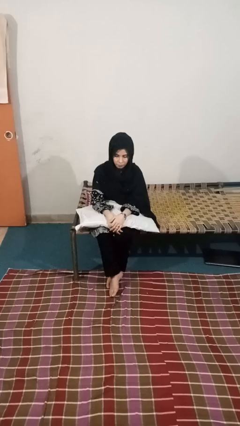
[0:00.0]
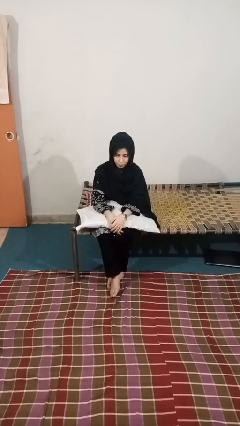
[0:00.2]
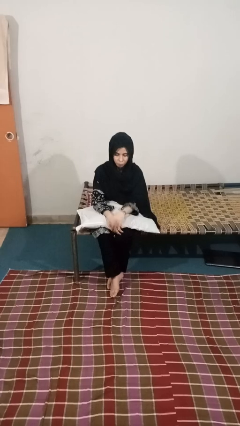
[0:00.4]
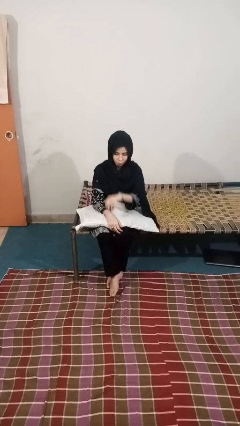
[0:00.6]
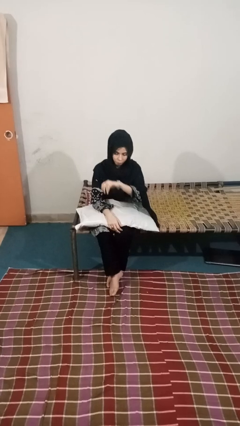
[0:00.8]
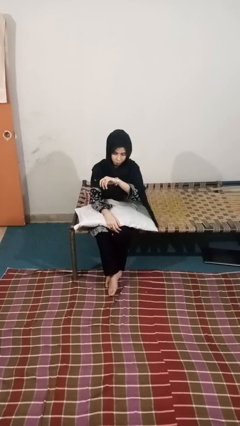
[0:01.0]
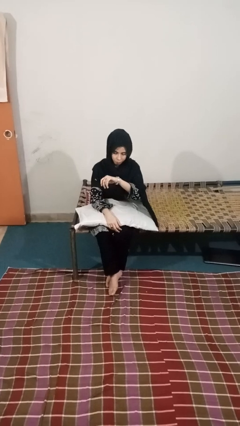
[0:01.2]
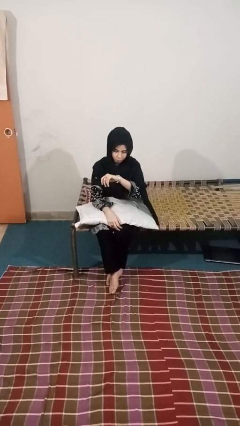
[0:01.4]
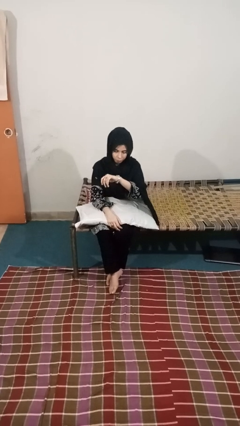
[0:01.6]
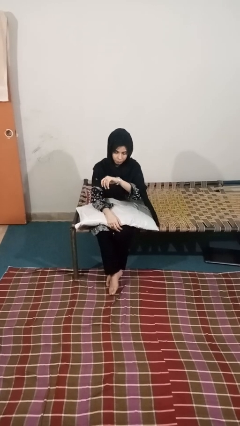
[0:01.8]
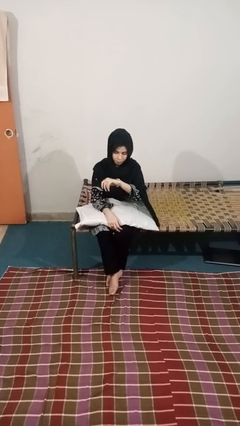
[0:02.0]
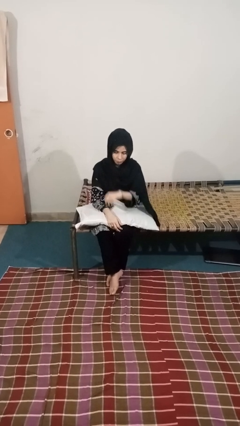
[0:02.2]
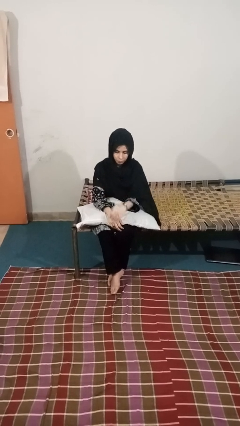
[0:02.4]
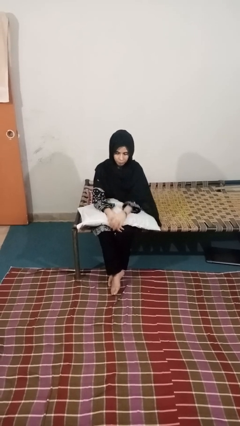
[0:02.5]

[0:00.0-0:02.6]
person looks at wristwatch

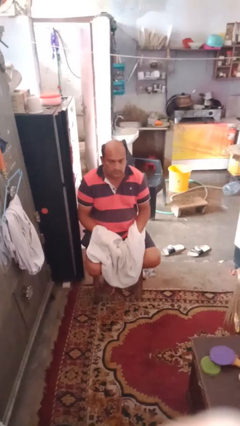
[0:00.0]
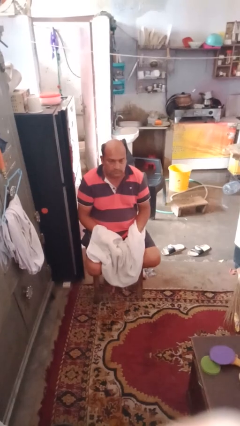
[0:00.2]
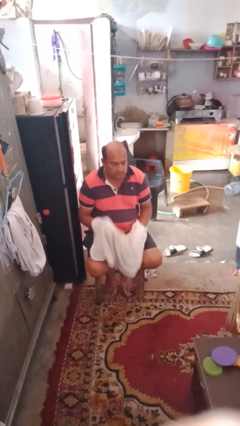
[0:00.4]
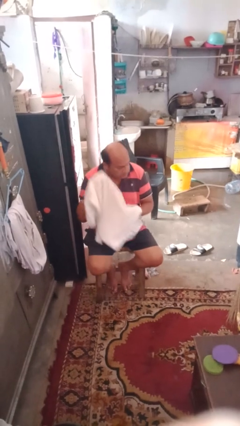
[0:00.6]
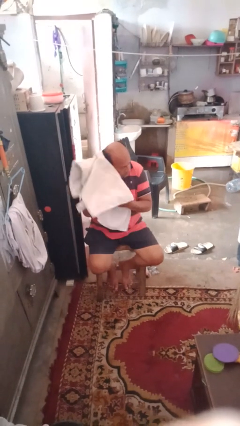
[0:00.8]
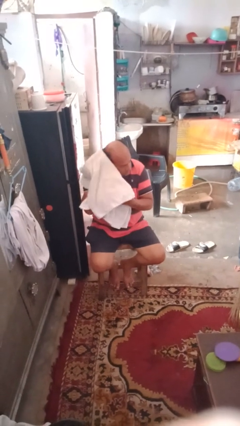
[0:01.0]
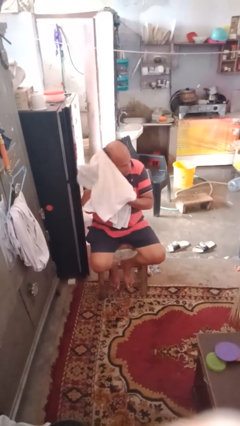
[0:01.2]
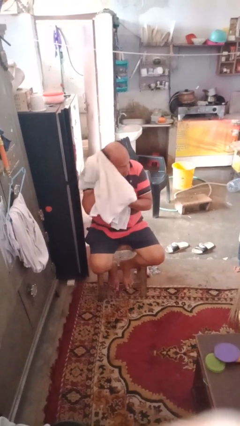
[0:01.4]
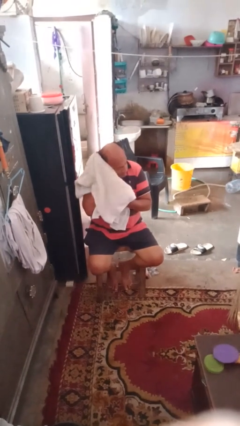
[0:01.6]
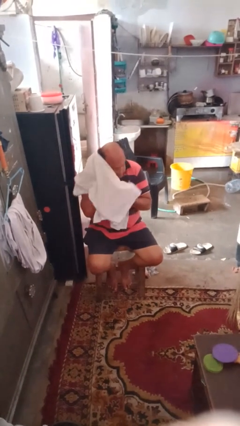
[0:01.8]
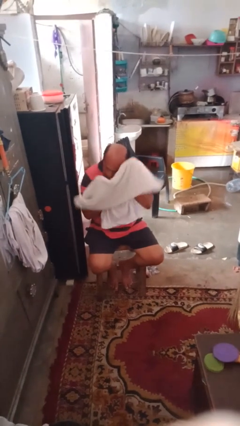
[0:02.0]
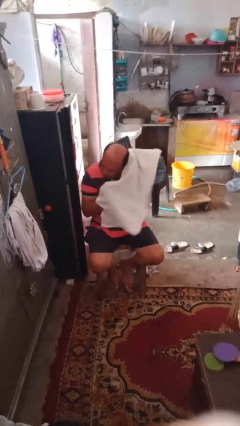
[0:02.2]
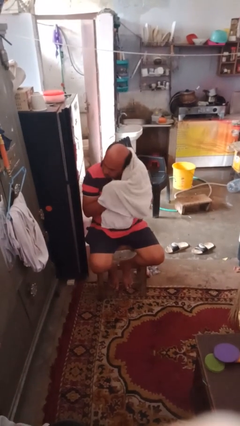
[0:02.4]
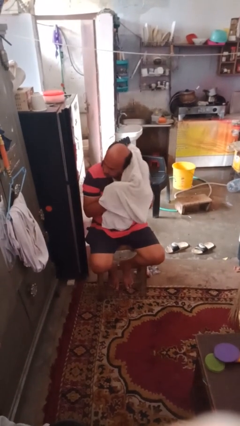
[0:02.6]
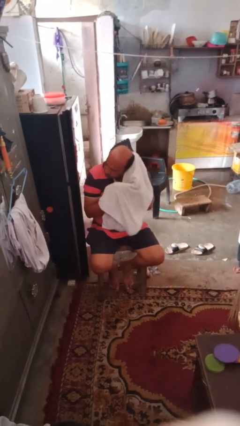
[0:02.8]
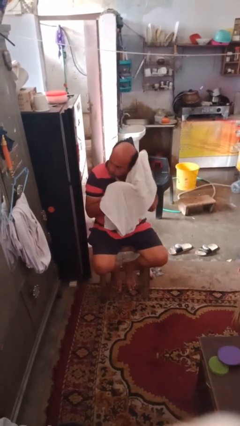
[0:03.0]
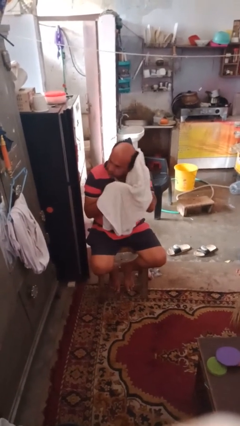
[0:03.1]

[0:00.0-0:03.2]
person dries hair with towel

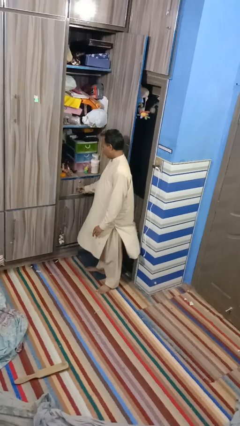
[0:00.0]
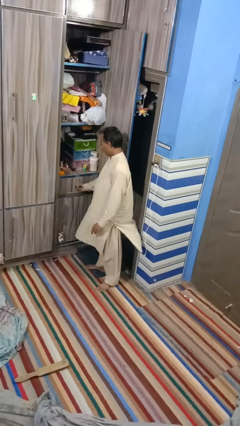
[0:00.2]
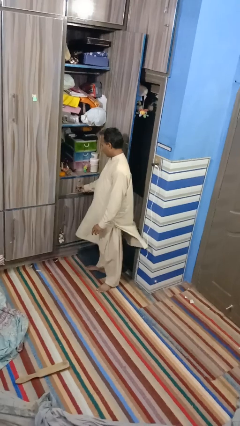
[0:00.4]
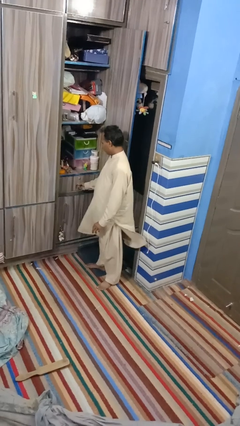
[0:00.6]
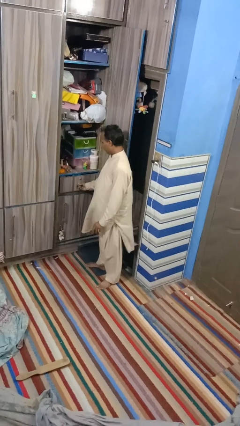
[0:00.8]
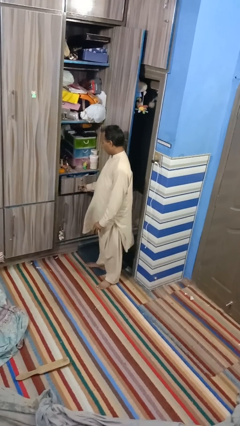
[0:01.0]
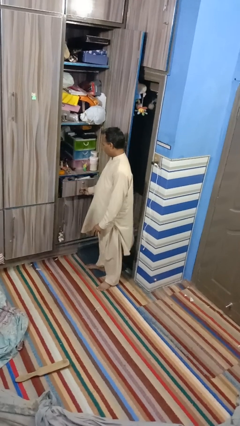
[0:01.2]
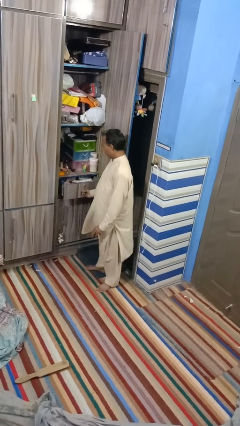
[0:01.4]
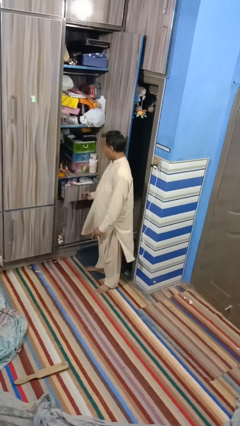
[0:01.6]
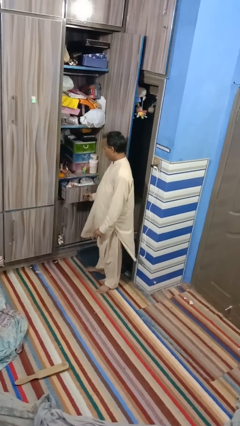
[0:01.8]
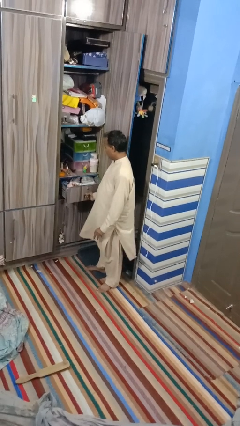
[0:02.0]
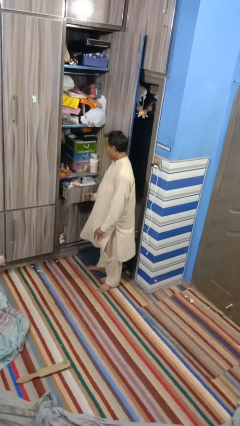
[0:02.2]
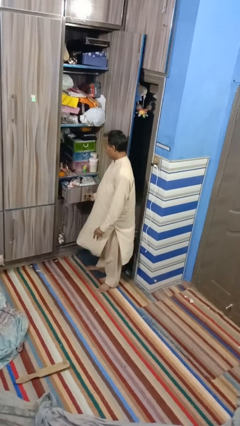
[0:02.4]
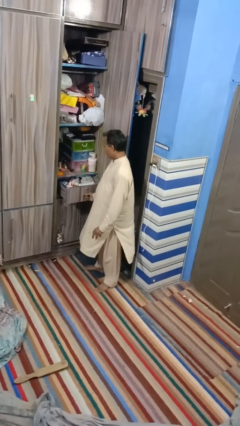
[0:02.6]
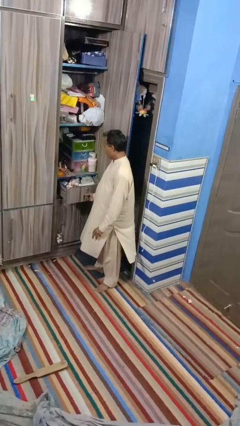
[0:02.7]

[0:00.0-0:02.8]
person opens dresser drawer

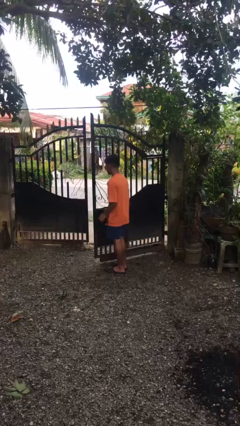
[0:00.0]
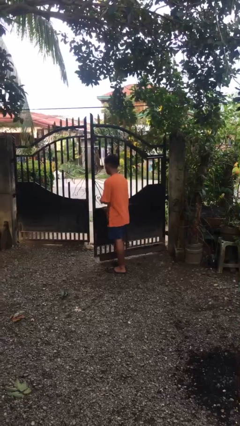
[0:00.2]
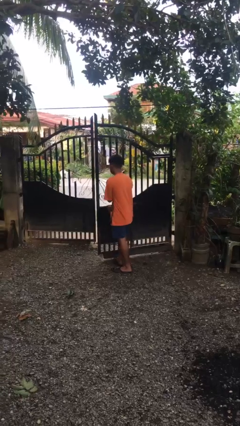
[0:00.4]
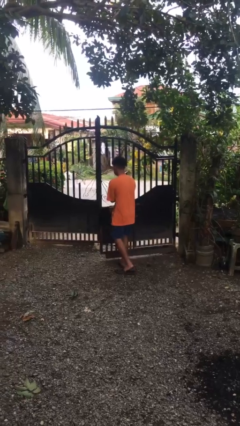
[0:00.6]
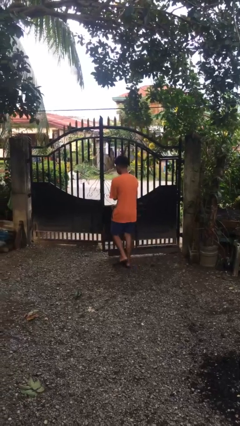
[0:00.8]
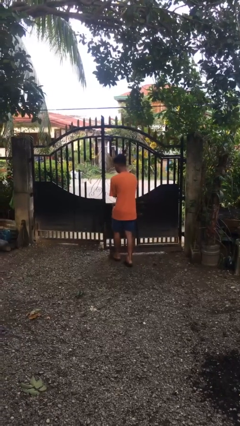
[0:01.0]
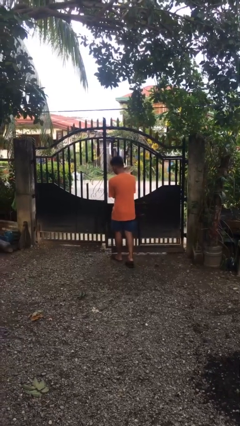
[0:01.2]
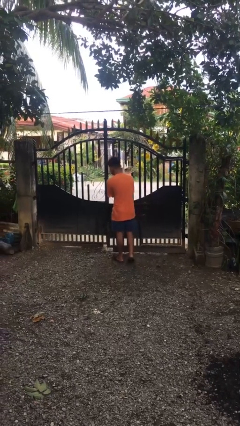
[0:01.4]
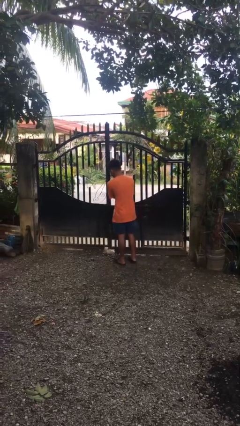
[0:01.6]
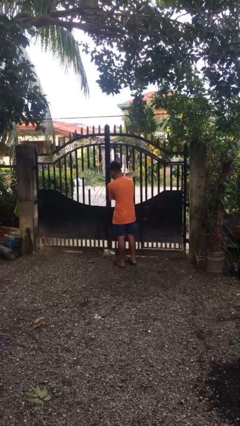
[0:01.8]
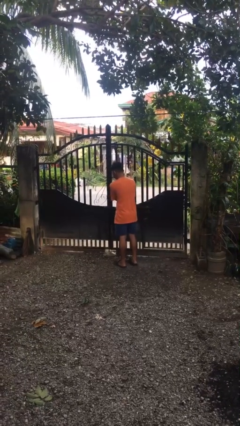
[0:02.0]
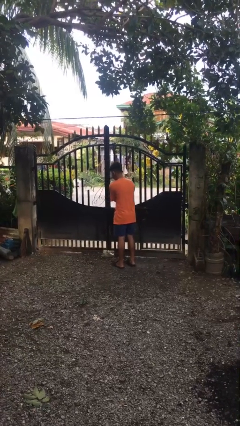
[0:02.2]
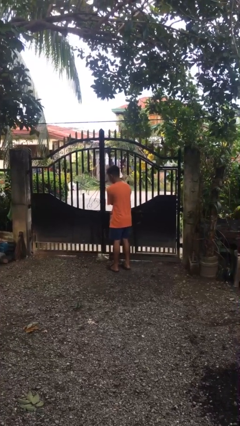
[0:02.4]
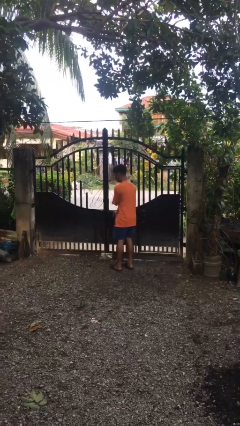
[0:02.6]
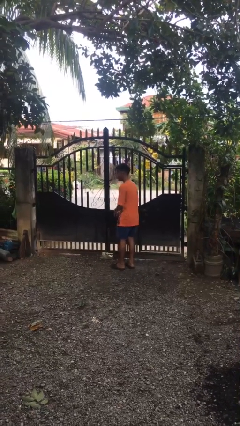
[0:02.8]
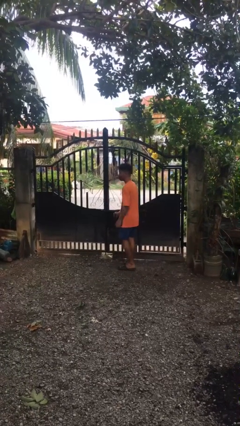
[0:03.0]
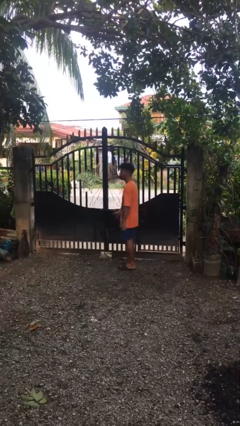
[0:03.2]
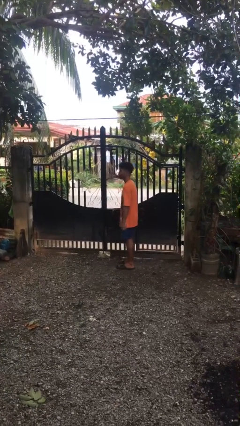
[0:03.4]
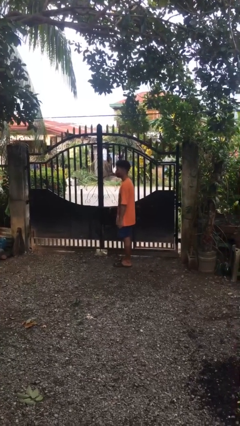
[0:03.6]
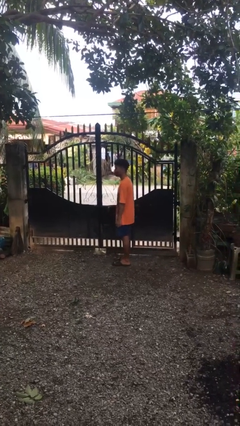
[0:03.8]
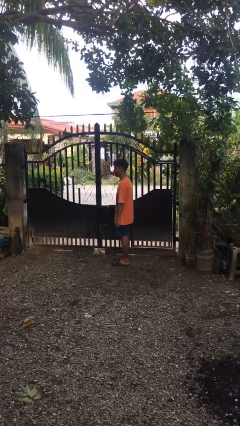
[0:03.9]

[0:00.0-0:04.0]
person closes gate

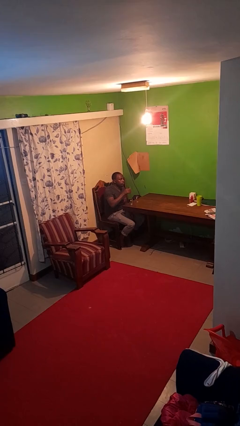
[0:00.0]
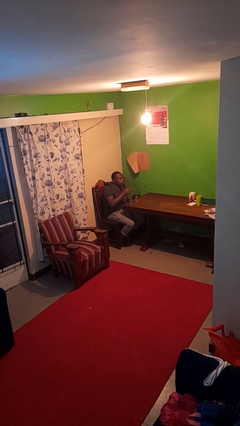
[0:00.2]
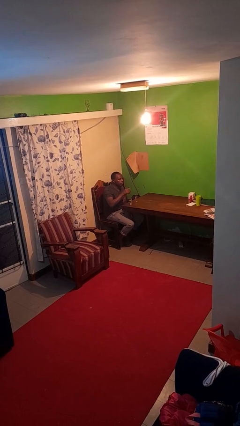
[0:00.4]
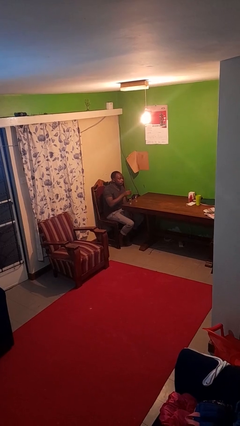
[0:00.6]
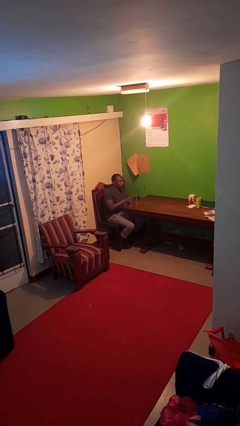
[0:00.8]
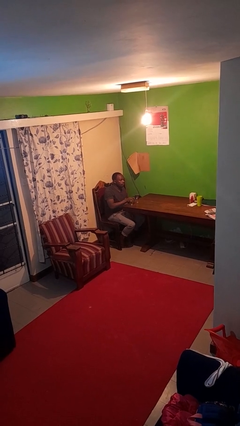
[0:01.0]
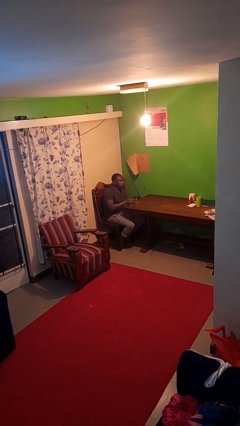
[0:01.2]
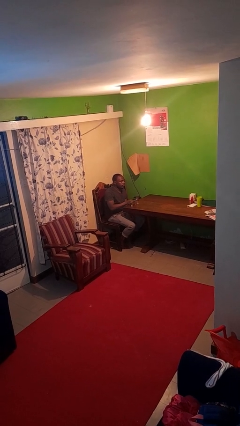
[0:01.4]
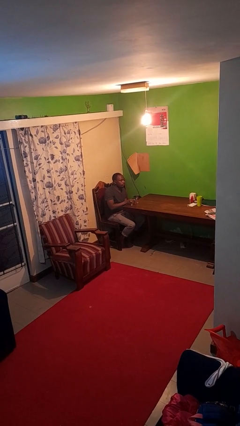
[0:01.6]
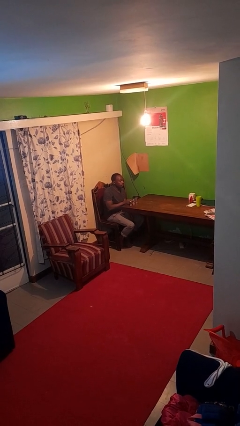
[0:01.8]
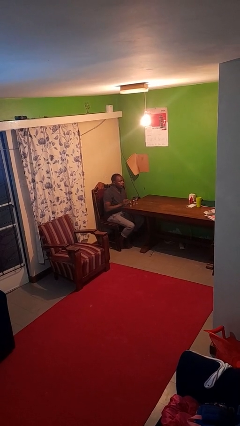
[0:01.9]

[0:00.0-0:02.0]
person puts down object on table

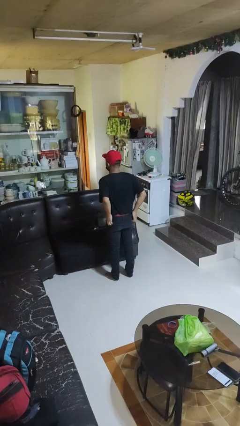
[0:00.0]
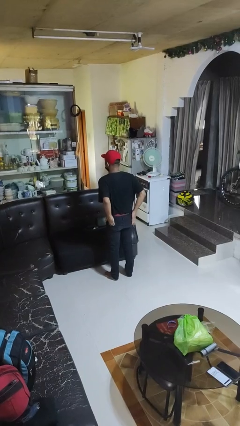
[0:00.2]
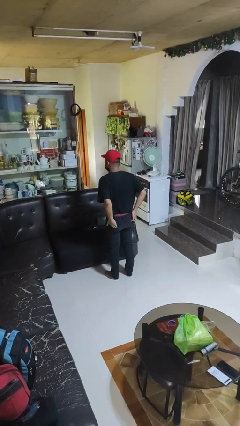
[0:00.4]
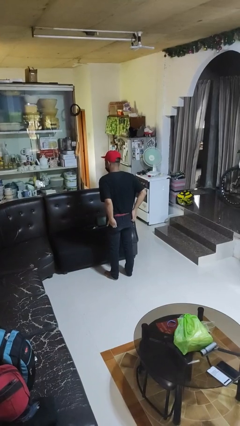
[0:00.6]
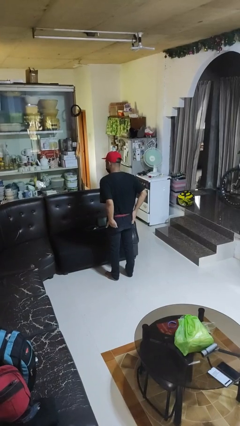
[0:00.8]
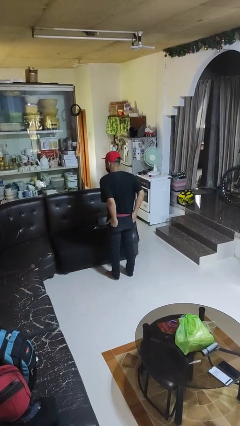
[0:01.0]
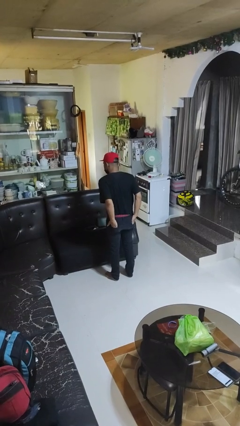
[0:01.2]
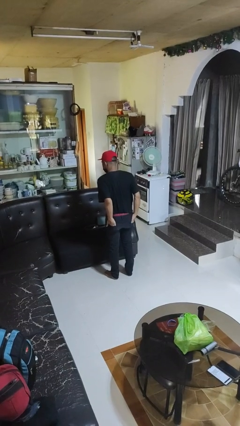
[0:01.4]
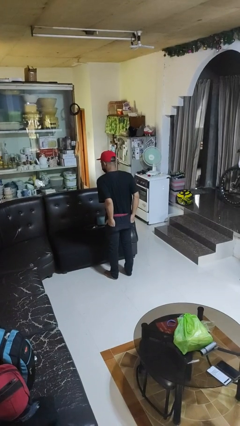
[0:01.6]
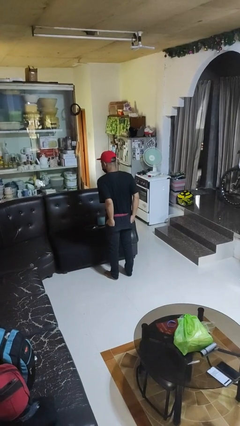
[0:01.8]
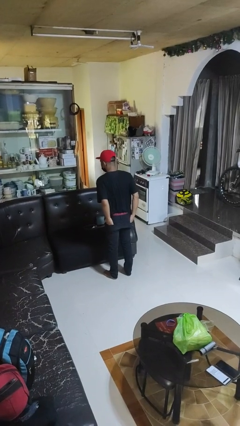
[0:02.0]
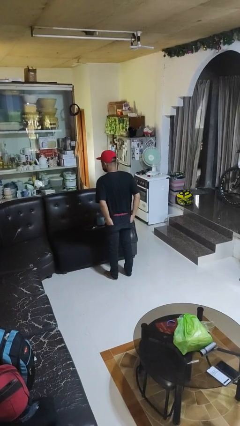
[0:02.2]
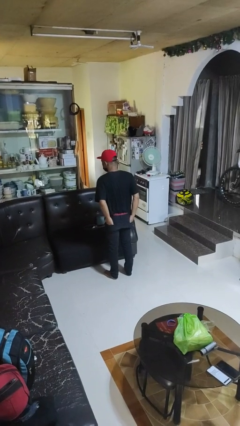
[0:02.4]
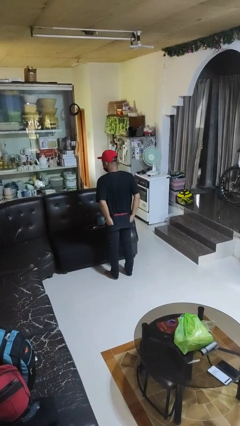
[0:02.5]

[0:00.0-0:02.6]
person puts hands in back pockets
